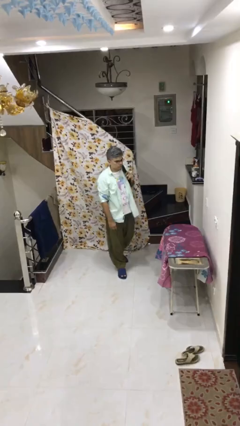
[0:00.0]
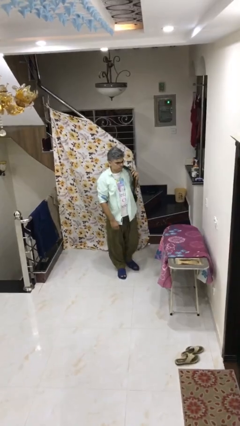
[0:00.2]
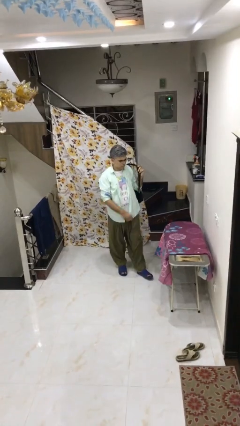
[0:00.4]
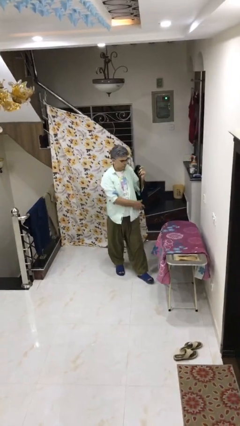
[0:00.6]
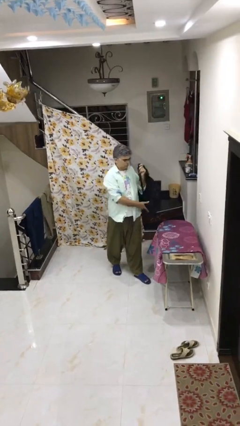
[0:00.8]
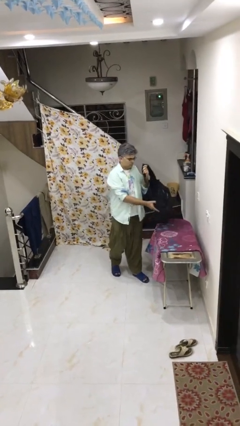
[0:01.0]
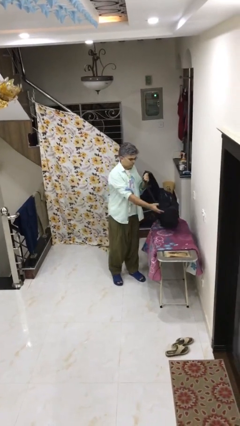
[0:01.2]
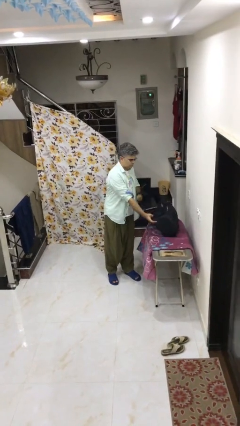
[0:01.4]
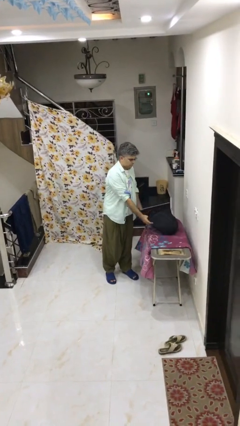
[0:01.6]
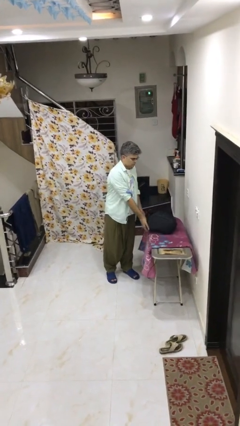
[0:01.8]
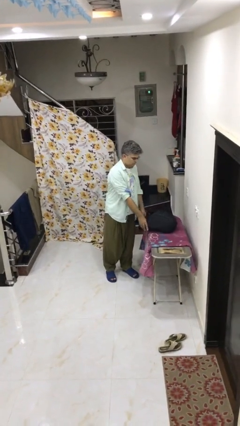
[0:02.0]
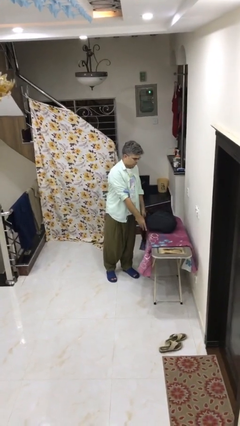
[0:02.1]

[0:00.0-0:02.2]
person puts down object on table

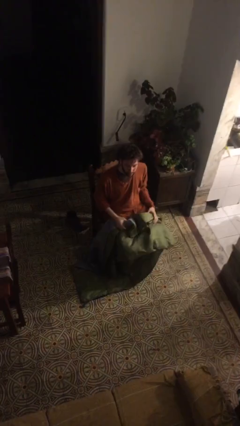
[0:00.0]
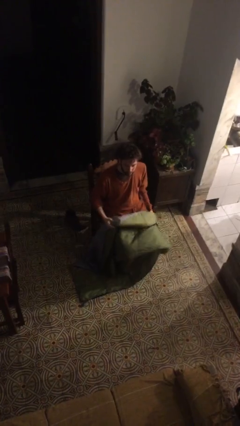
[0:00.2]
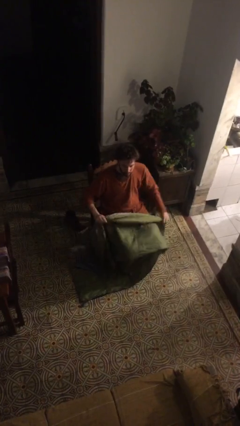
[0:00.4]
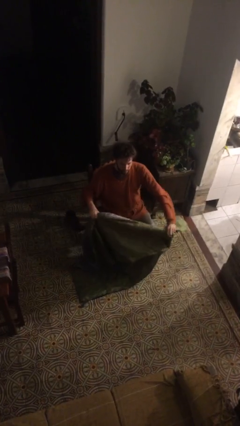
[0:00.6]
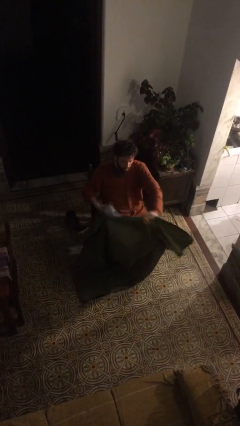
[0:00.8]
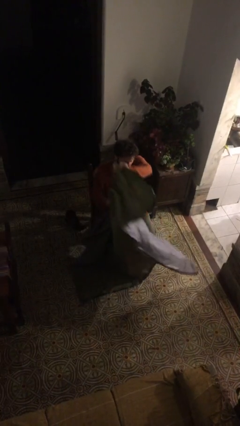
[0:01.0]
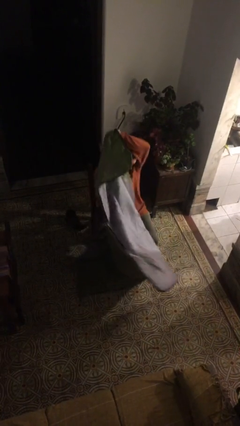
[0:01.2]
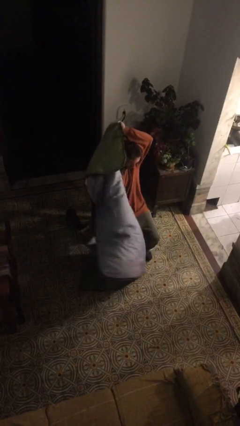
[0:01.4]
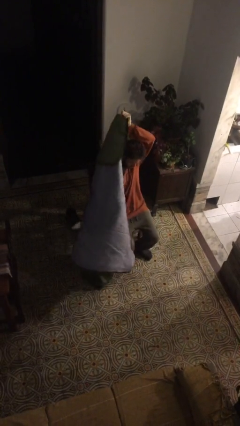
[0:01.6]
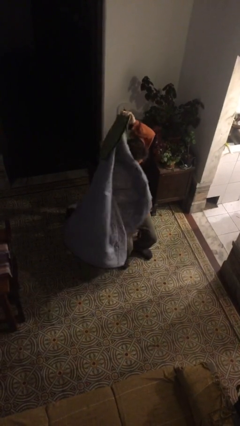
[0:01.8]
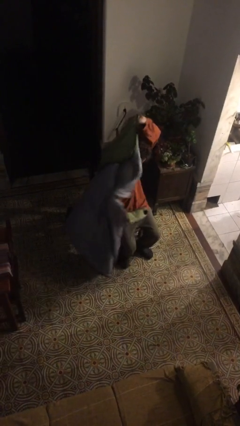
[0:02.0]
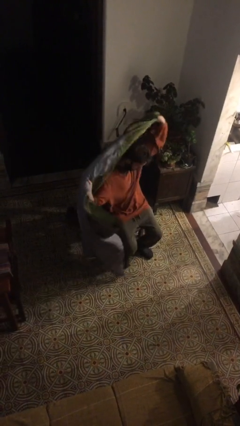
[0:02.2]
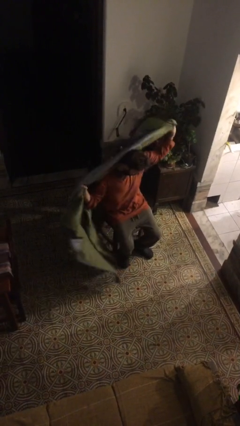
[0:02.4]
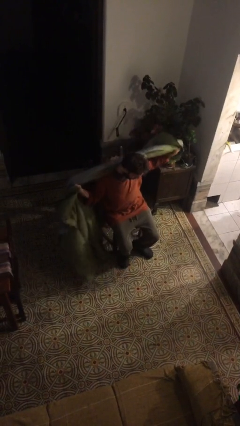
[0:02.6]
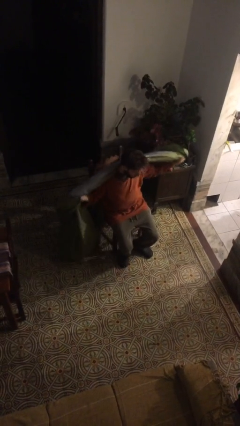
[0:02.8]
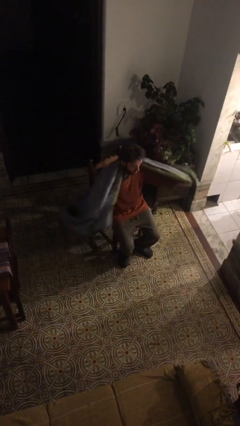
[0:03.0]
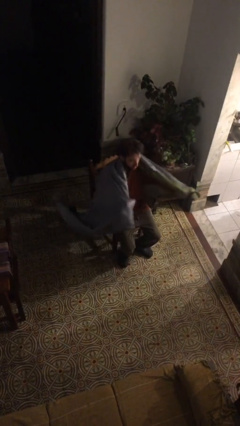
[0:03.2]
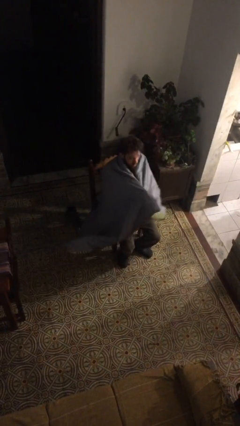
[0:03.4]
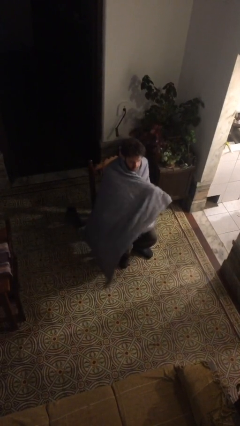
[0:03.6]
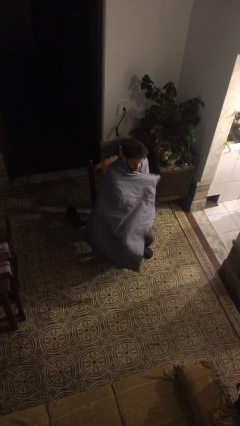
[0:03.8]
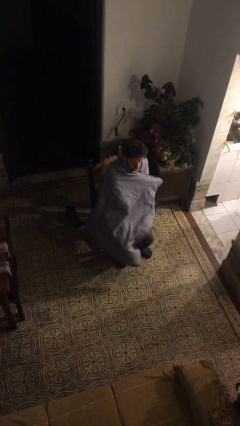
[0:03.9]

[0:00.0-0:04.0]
person covers with blanket

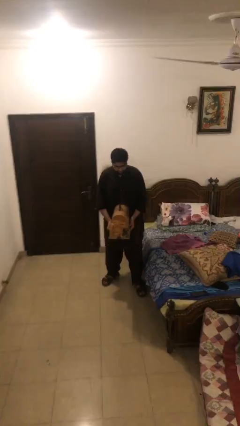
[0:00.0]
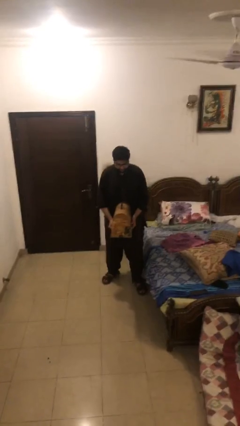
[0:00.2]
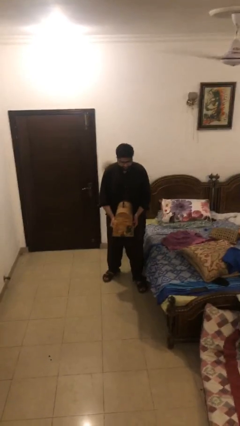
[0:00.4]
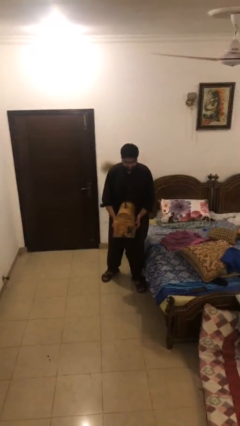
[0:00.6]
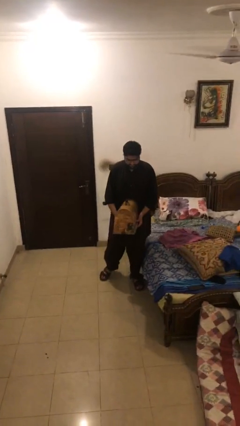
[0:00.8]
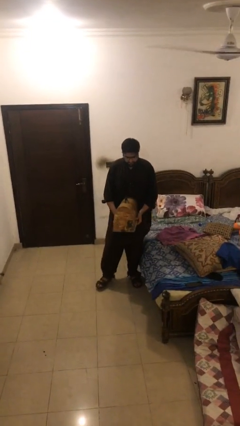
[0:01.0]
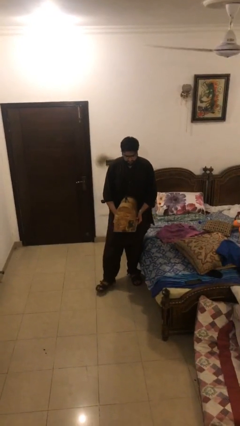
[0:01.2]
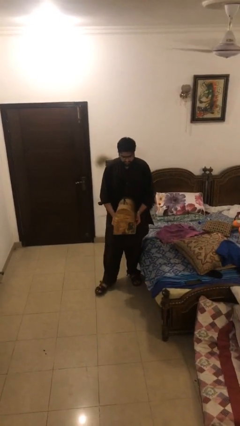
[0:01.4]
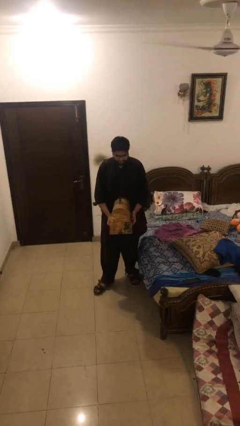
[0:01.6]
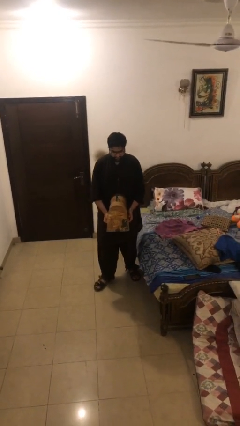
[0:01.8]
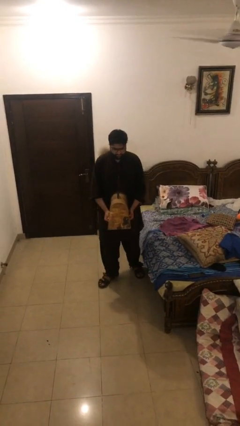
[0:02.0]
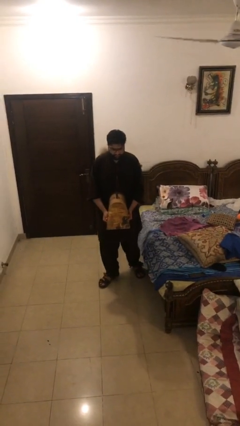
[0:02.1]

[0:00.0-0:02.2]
person carries heavy object

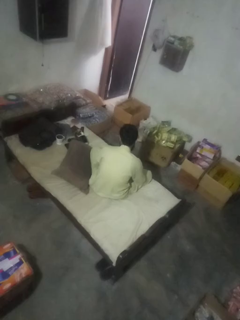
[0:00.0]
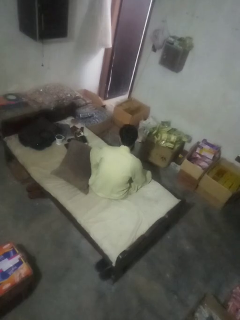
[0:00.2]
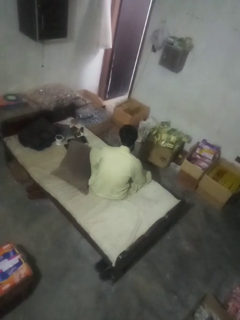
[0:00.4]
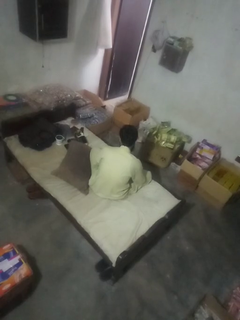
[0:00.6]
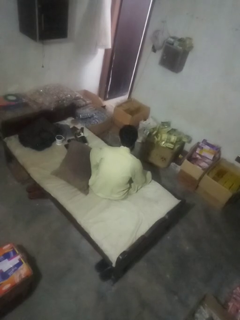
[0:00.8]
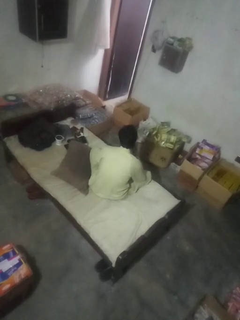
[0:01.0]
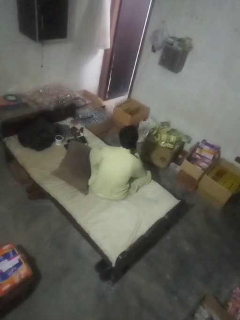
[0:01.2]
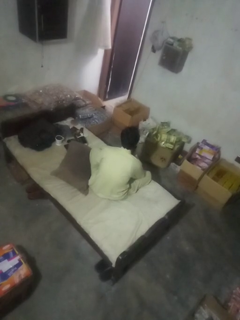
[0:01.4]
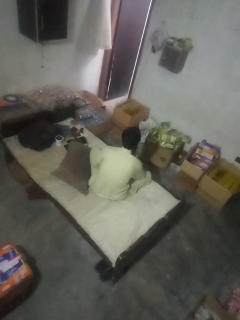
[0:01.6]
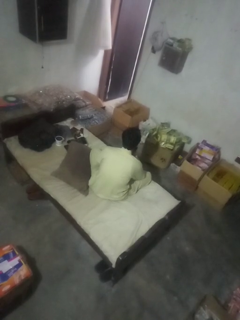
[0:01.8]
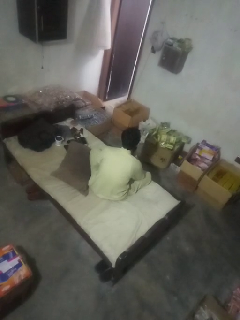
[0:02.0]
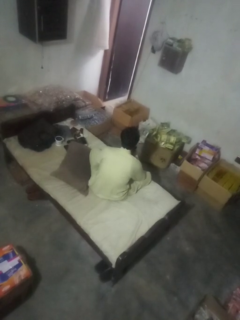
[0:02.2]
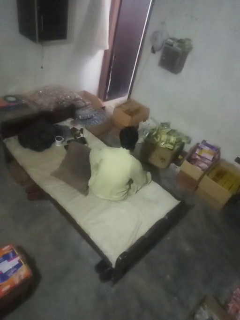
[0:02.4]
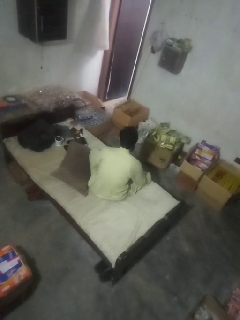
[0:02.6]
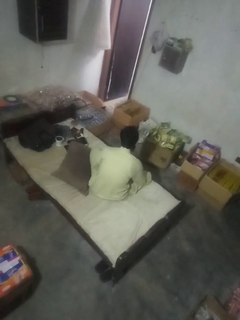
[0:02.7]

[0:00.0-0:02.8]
person strokes chin

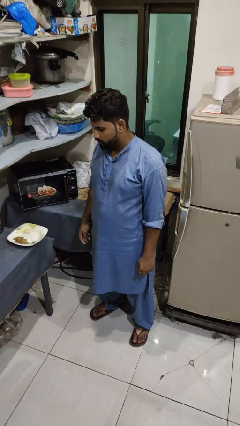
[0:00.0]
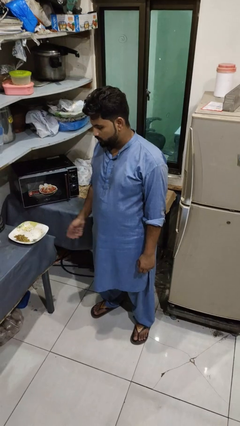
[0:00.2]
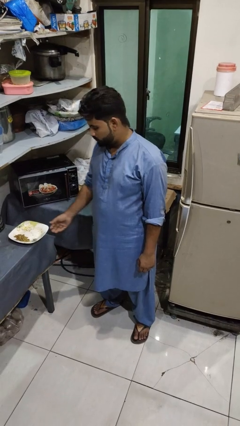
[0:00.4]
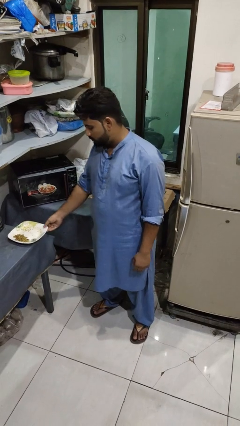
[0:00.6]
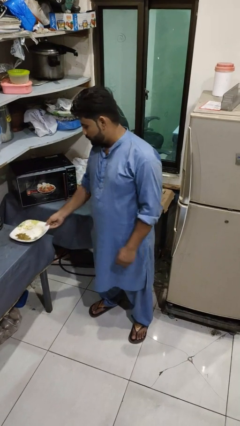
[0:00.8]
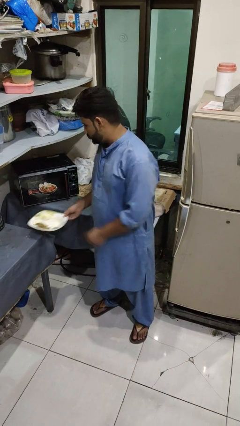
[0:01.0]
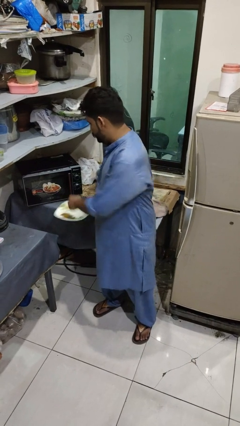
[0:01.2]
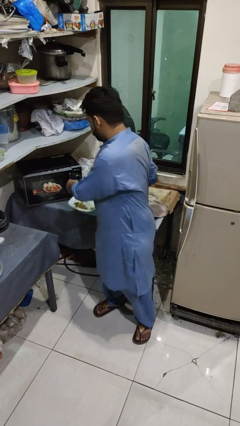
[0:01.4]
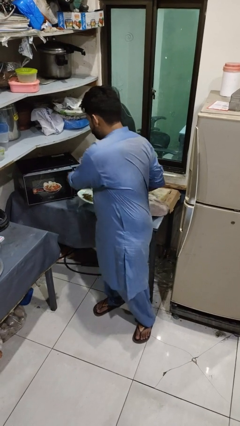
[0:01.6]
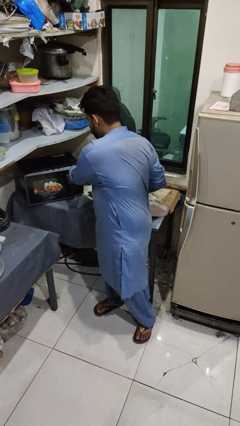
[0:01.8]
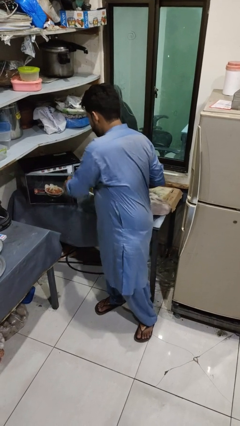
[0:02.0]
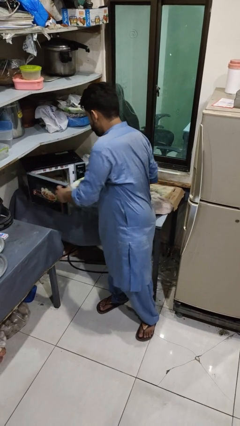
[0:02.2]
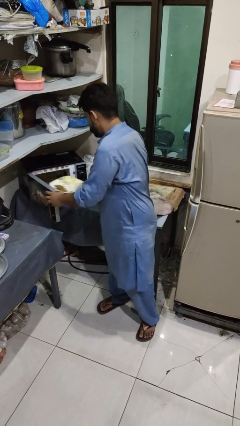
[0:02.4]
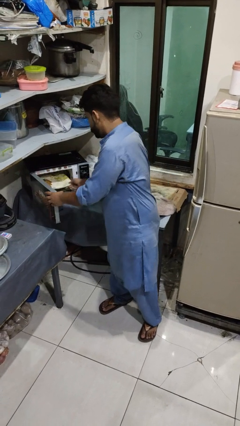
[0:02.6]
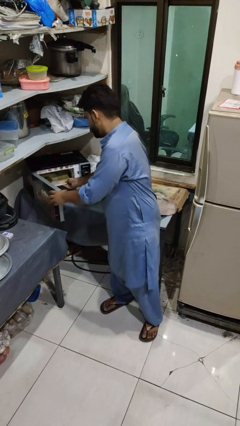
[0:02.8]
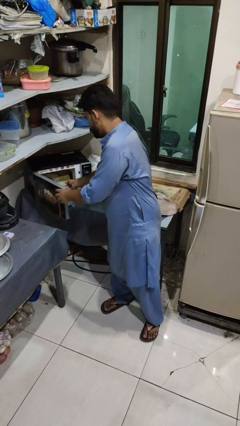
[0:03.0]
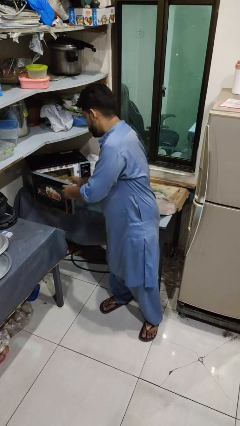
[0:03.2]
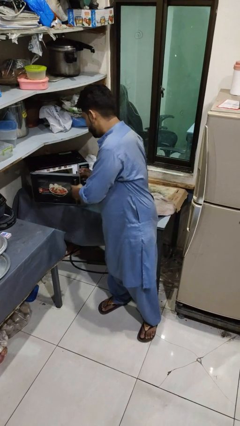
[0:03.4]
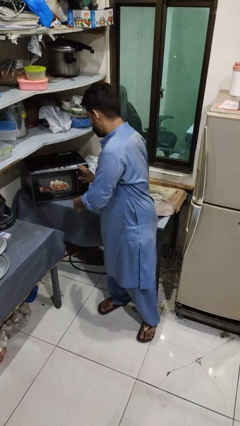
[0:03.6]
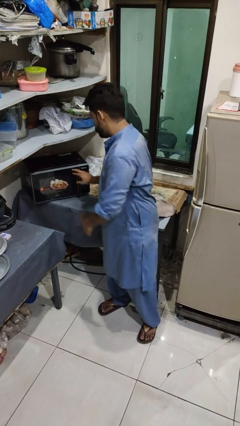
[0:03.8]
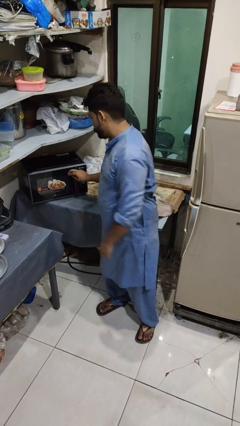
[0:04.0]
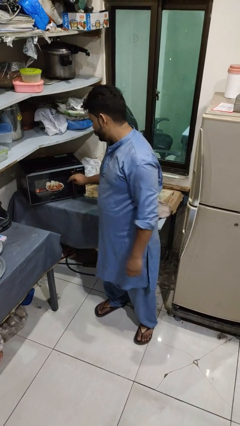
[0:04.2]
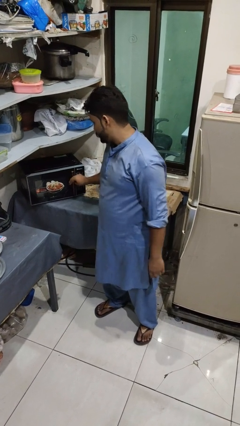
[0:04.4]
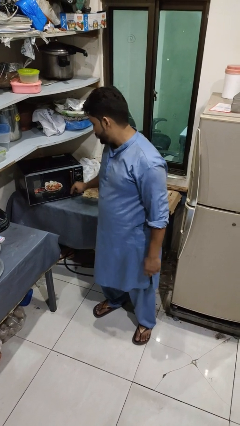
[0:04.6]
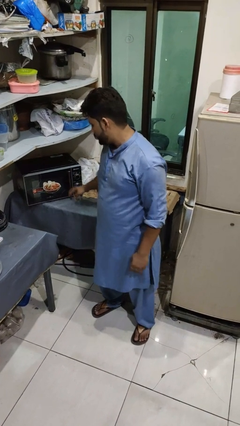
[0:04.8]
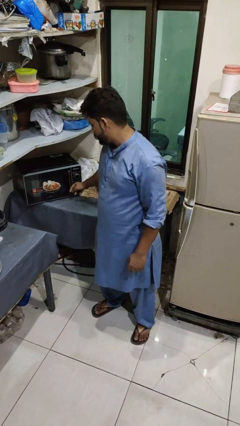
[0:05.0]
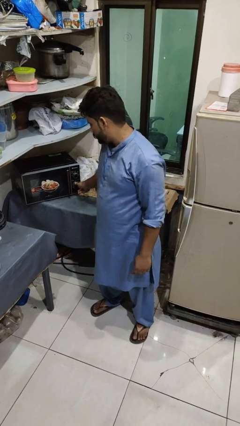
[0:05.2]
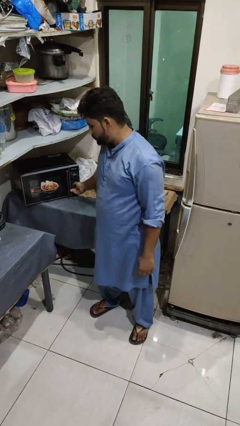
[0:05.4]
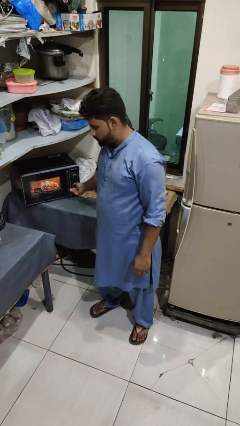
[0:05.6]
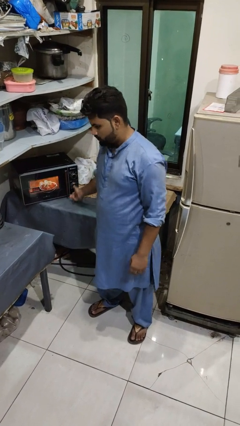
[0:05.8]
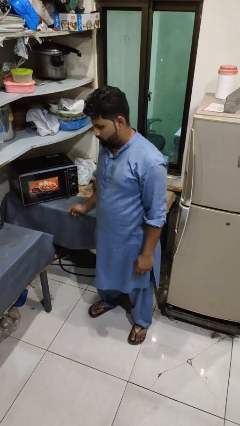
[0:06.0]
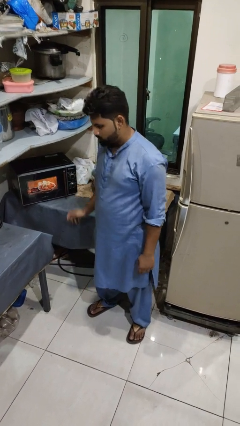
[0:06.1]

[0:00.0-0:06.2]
person puts object into microwave
